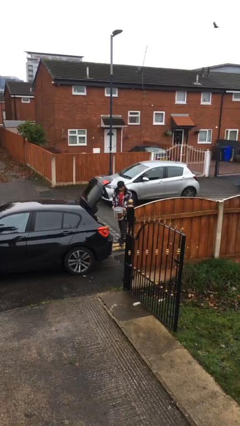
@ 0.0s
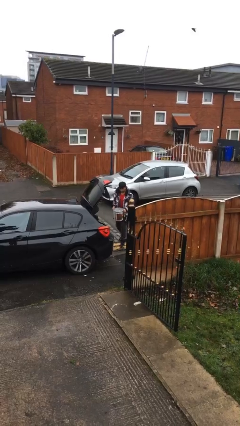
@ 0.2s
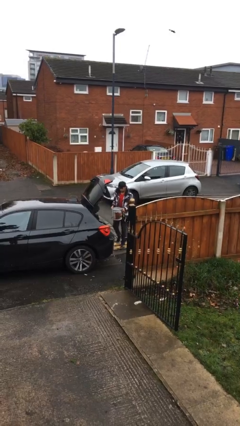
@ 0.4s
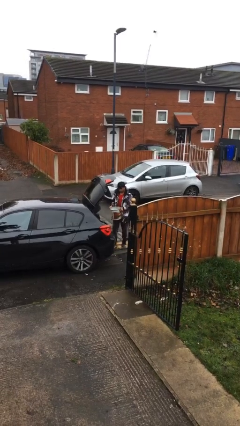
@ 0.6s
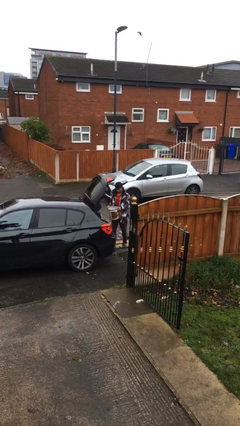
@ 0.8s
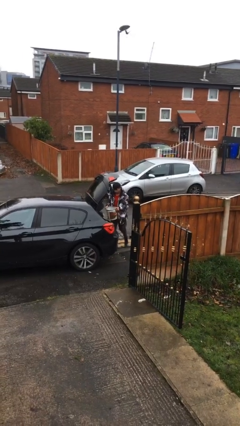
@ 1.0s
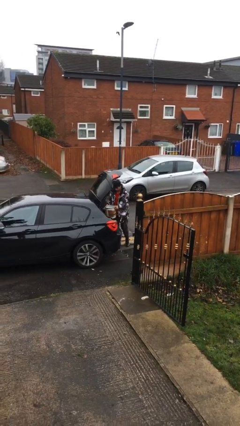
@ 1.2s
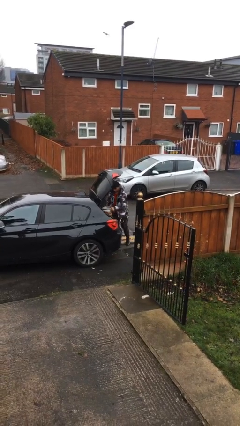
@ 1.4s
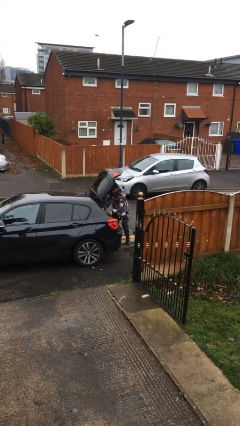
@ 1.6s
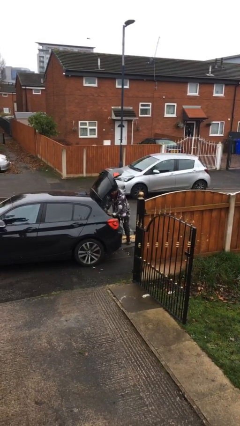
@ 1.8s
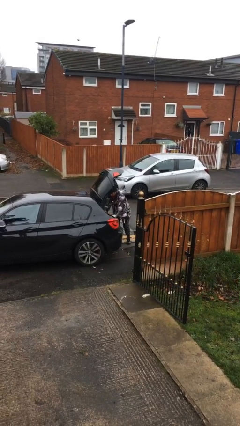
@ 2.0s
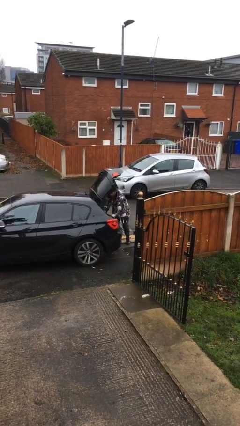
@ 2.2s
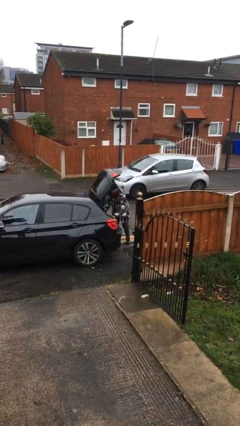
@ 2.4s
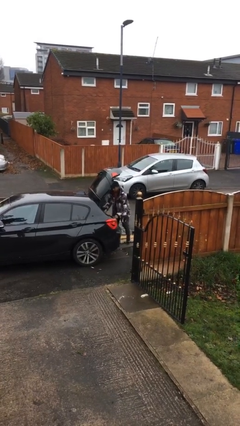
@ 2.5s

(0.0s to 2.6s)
person loads car

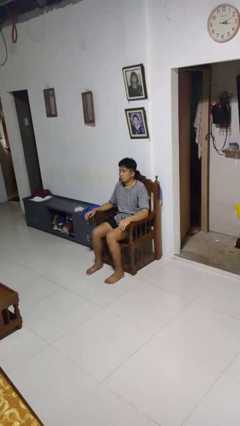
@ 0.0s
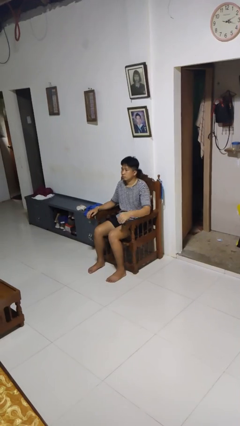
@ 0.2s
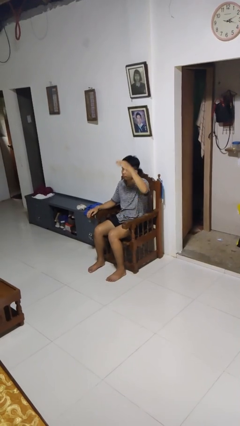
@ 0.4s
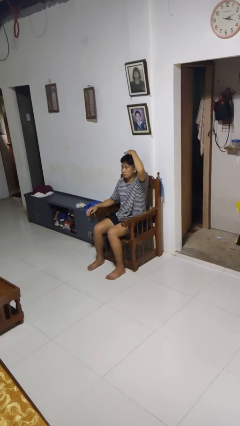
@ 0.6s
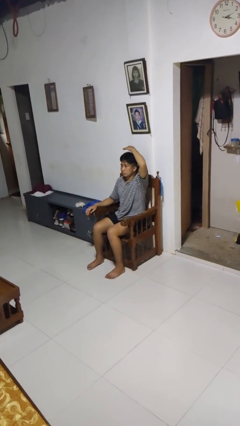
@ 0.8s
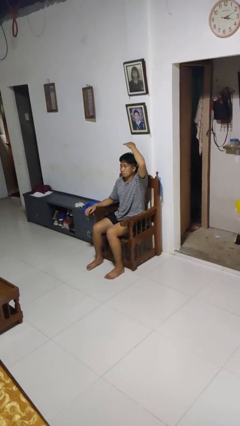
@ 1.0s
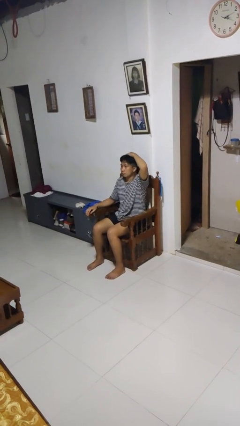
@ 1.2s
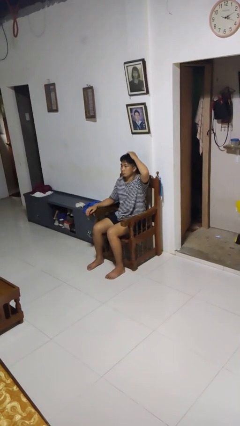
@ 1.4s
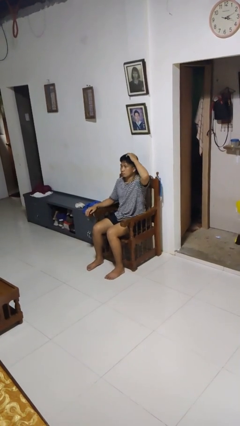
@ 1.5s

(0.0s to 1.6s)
person pats head

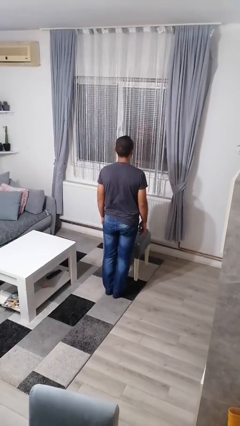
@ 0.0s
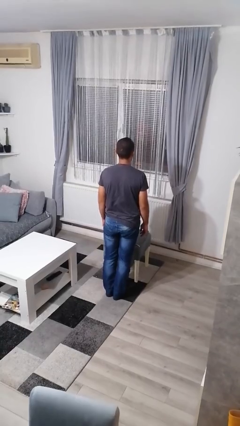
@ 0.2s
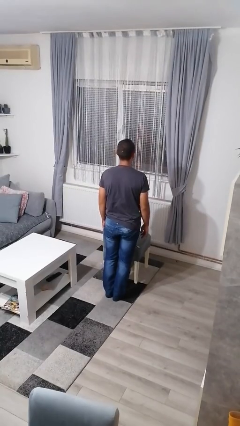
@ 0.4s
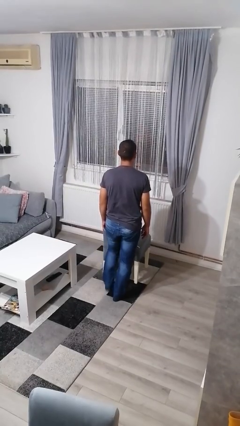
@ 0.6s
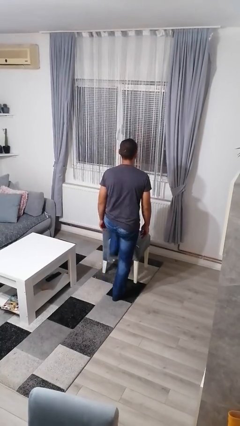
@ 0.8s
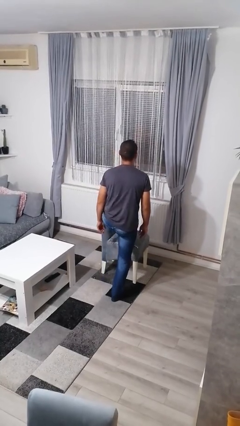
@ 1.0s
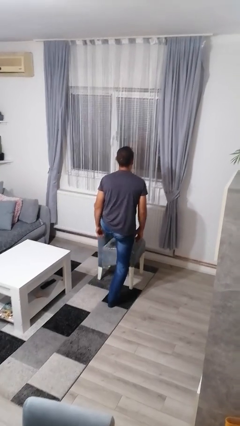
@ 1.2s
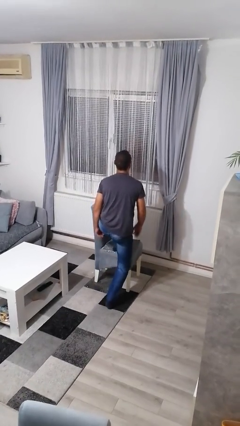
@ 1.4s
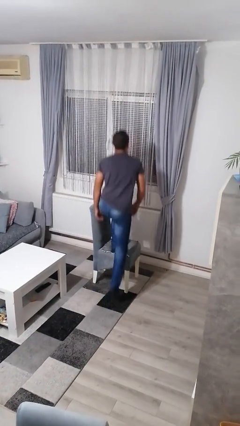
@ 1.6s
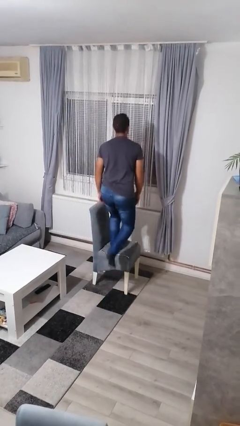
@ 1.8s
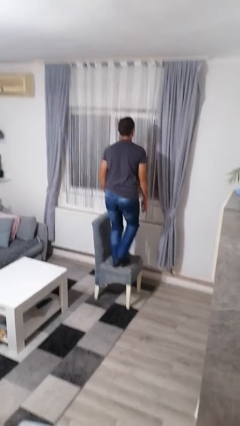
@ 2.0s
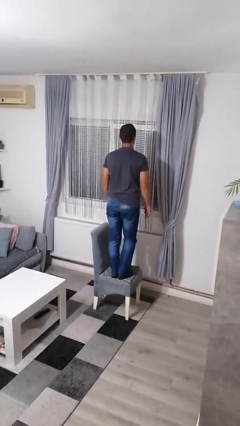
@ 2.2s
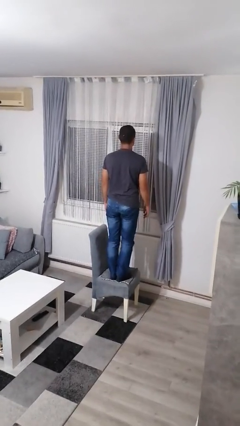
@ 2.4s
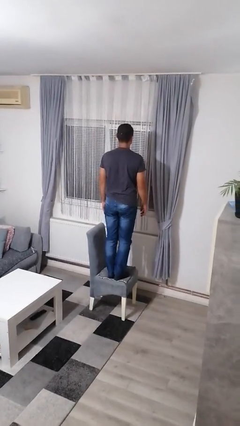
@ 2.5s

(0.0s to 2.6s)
person climbs on chair

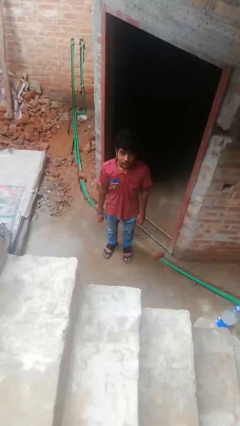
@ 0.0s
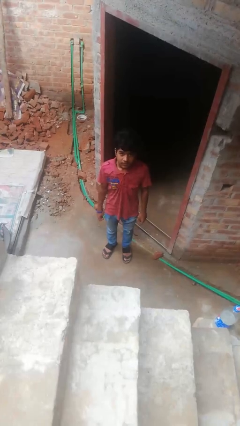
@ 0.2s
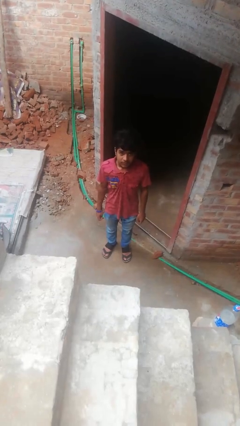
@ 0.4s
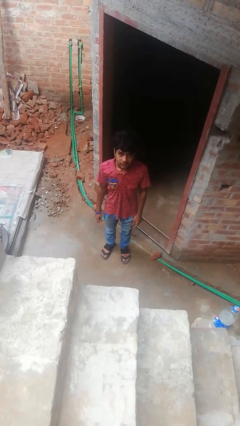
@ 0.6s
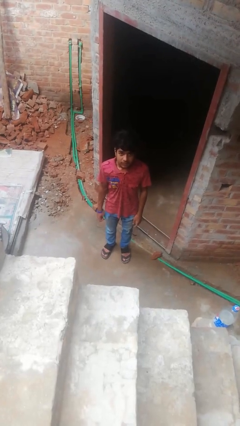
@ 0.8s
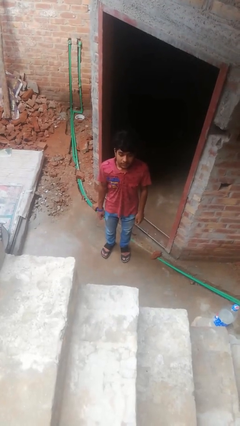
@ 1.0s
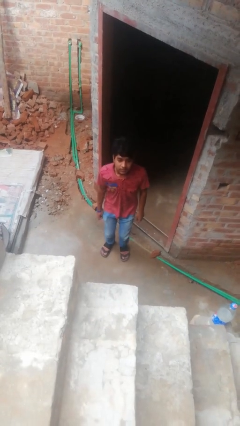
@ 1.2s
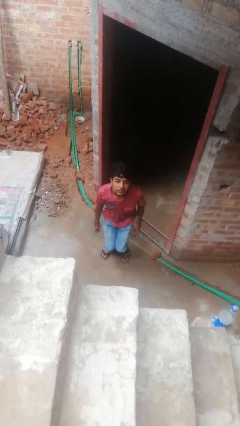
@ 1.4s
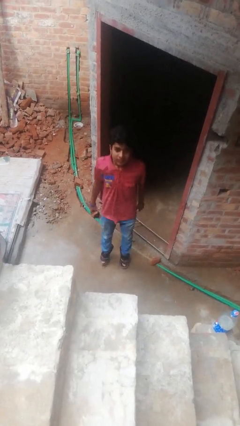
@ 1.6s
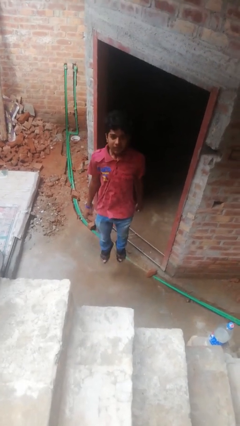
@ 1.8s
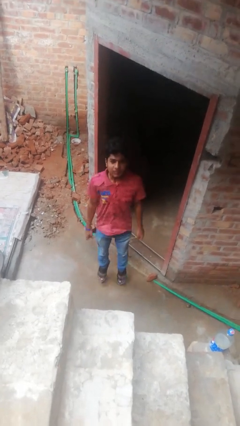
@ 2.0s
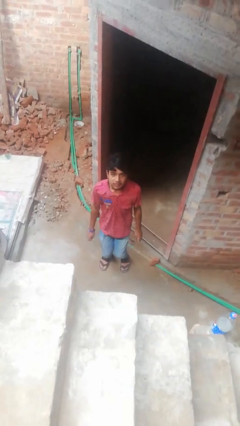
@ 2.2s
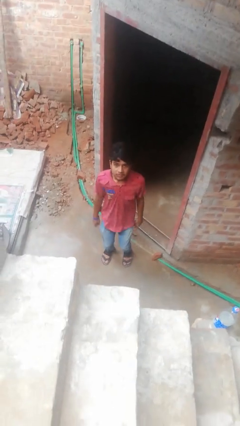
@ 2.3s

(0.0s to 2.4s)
person jumps

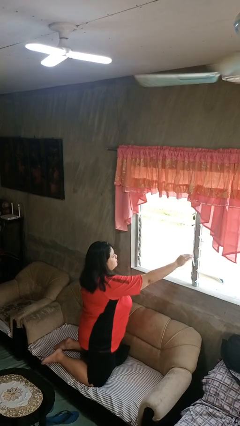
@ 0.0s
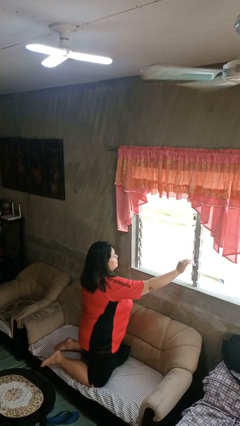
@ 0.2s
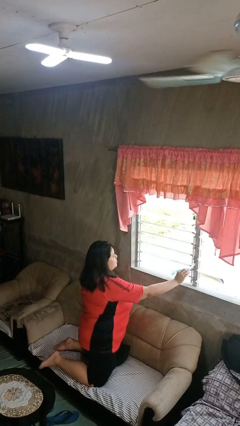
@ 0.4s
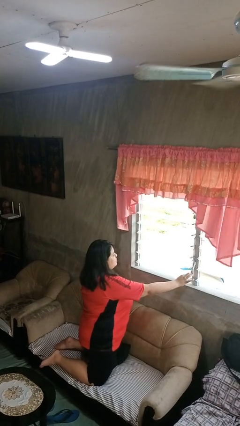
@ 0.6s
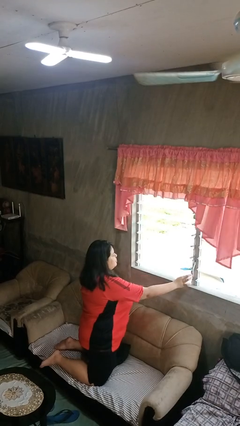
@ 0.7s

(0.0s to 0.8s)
person opens home window

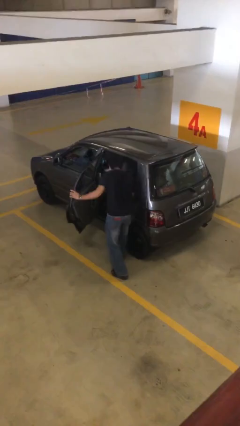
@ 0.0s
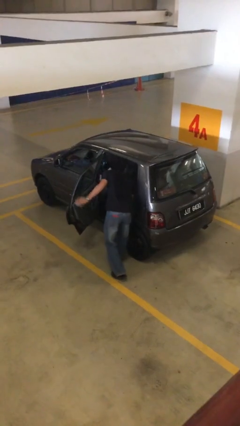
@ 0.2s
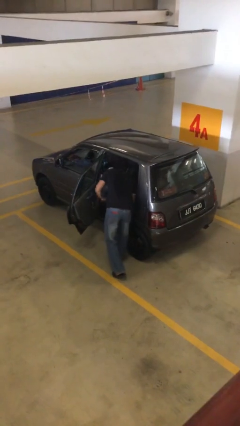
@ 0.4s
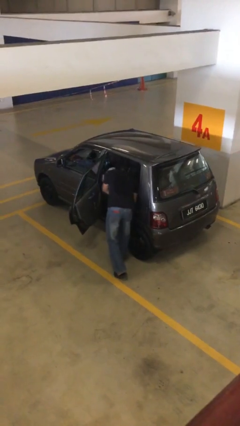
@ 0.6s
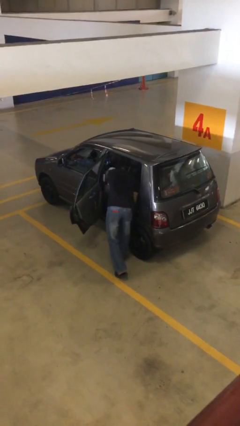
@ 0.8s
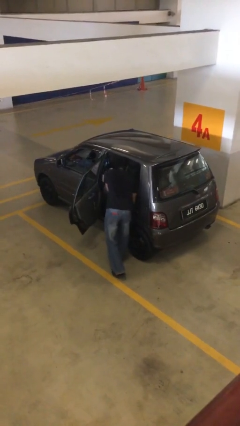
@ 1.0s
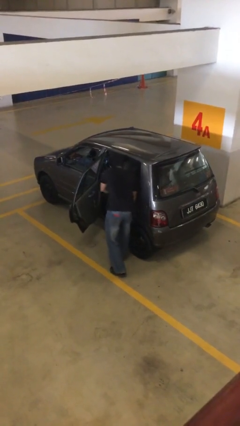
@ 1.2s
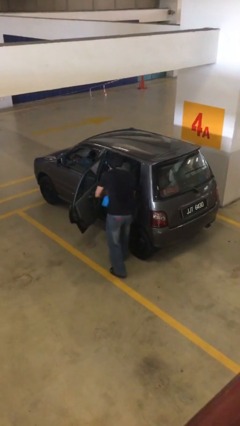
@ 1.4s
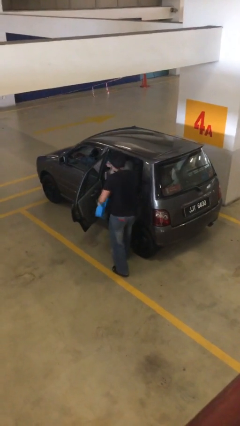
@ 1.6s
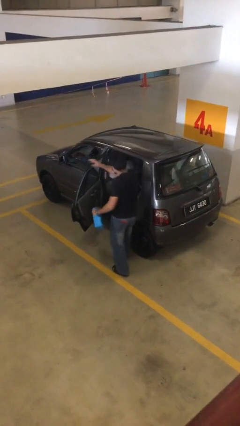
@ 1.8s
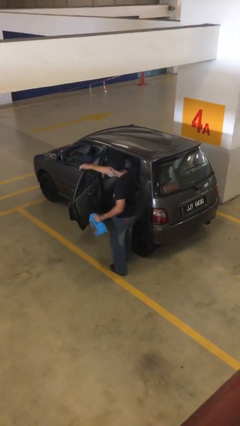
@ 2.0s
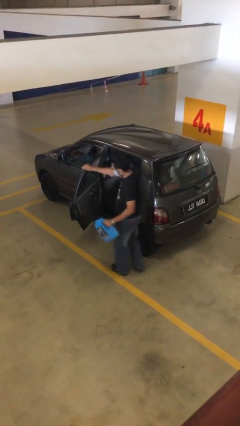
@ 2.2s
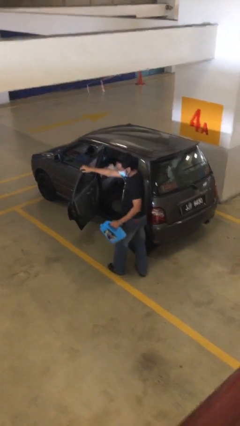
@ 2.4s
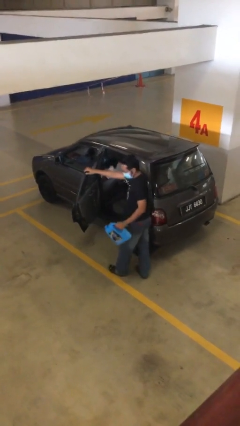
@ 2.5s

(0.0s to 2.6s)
person unloads car

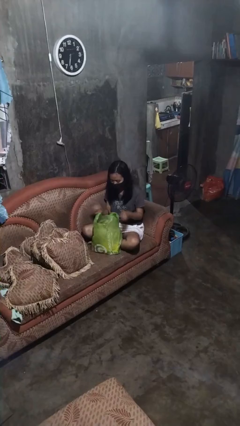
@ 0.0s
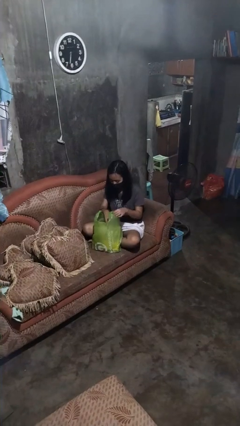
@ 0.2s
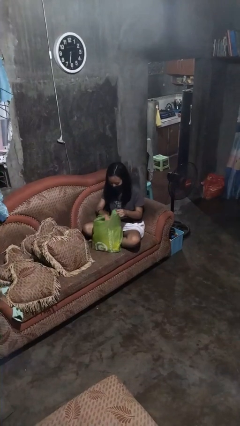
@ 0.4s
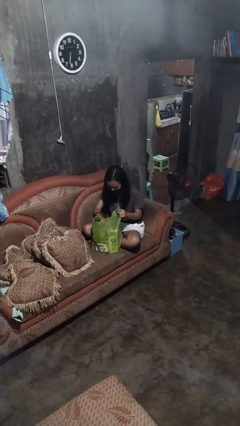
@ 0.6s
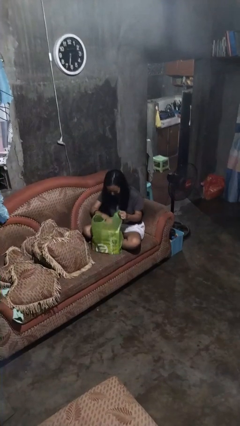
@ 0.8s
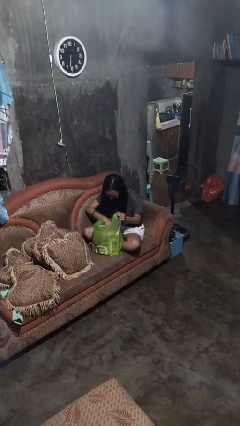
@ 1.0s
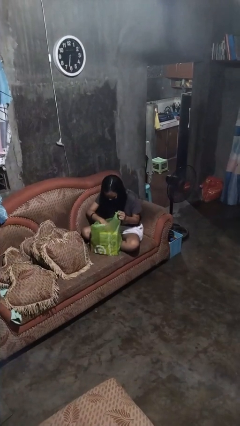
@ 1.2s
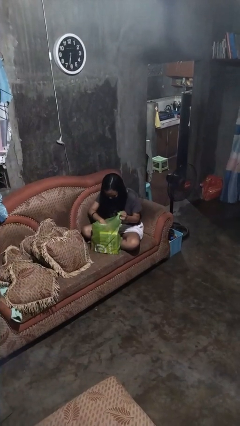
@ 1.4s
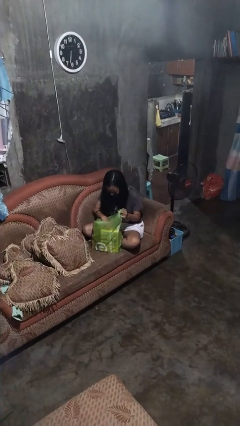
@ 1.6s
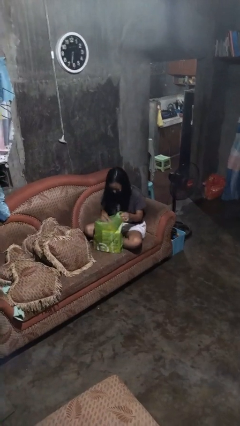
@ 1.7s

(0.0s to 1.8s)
person searches in bag

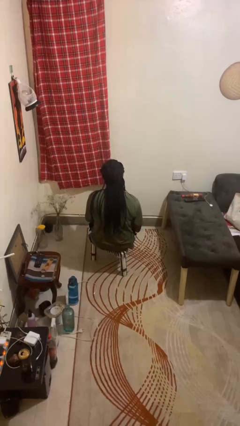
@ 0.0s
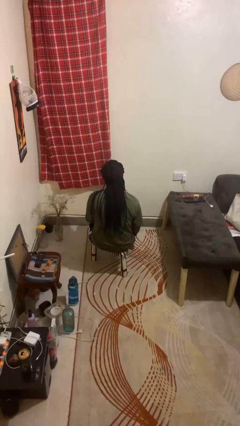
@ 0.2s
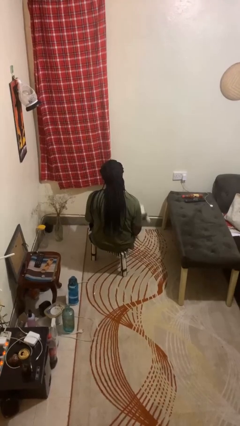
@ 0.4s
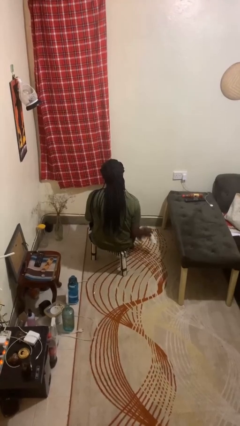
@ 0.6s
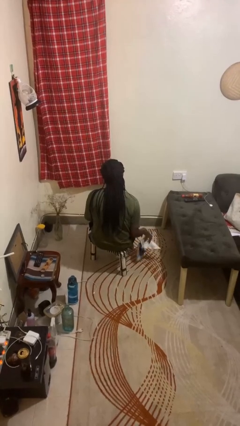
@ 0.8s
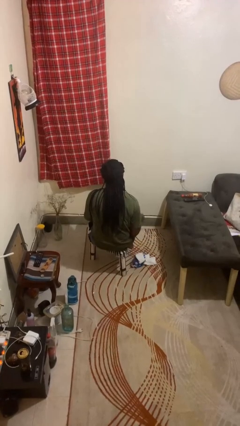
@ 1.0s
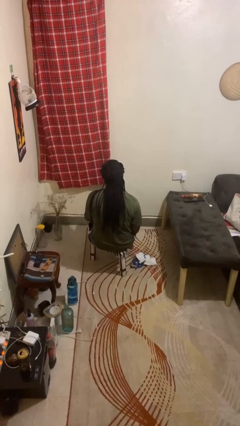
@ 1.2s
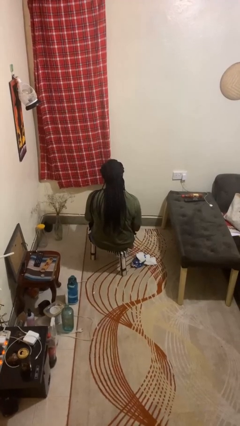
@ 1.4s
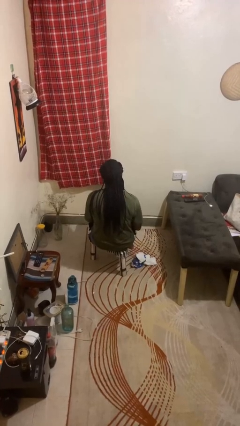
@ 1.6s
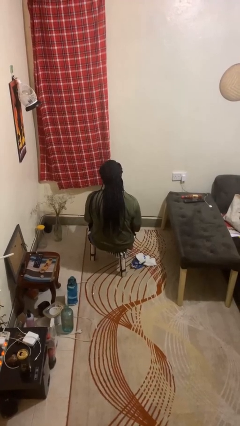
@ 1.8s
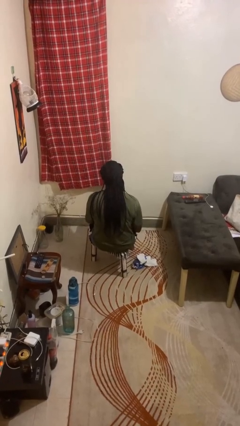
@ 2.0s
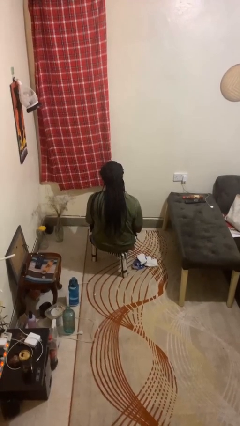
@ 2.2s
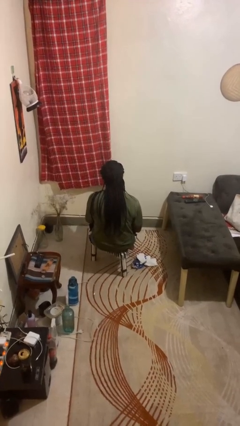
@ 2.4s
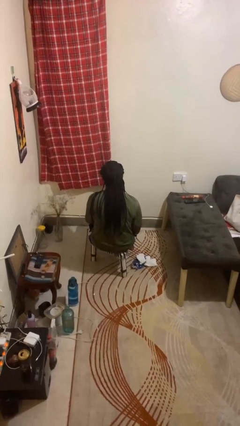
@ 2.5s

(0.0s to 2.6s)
person throws object to ground
